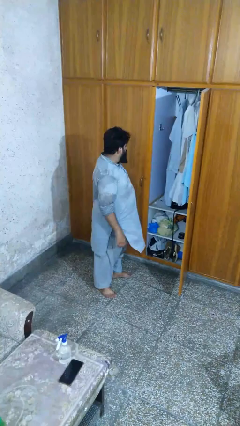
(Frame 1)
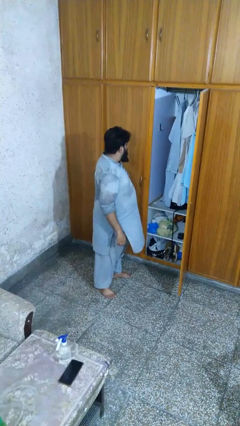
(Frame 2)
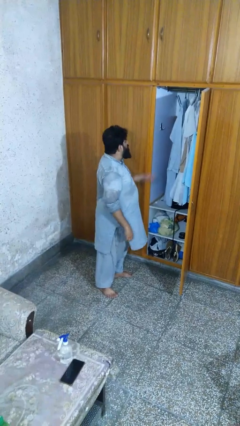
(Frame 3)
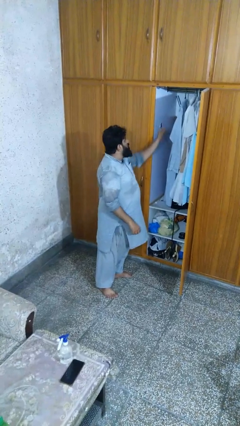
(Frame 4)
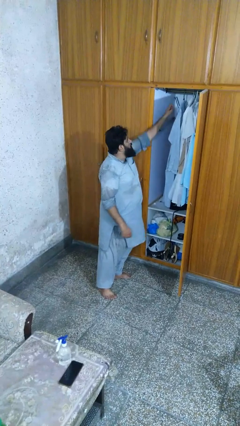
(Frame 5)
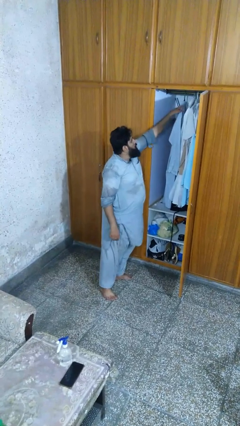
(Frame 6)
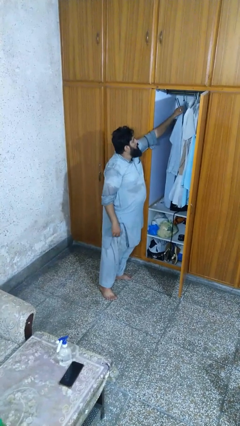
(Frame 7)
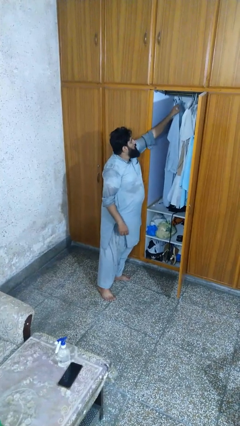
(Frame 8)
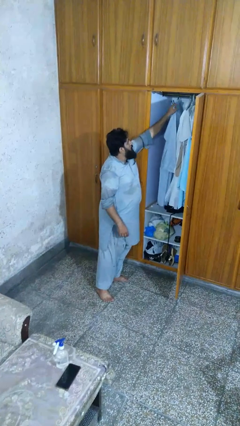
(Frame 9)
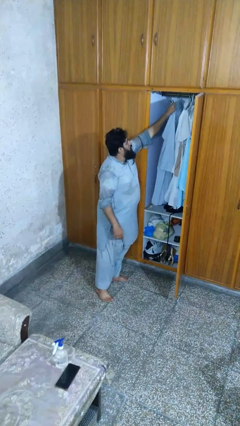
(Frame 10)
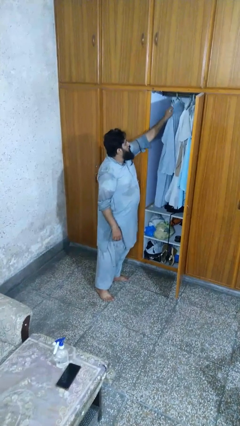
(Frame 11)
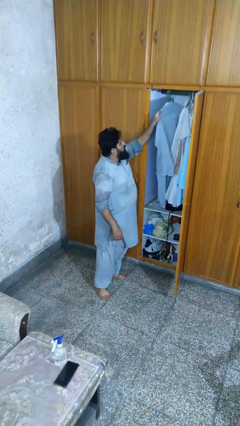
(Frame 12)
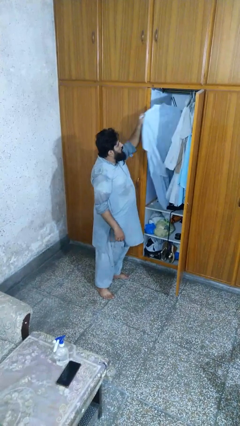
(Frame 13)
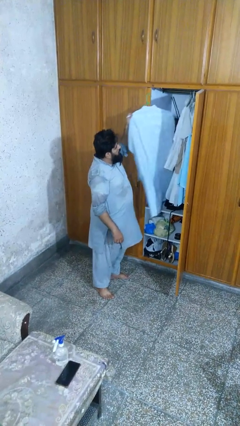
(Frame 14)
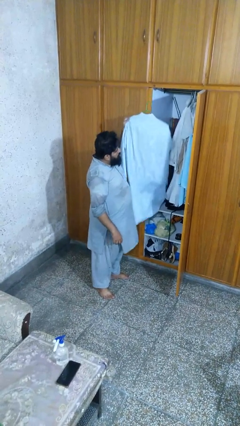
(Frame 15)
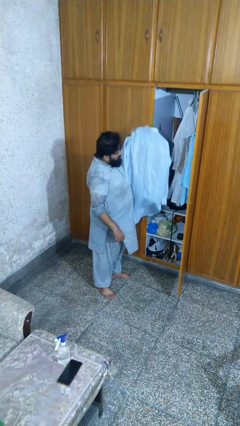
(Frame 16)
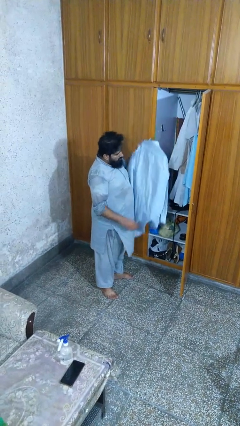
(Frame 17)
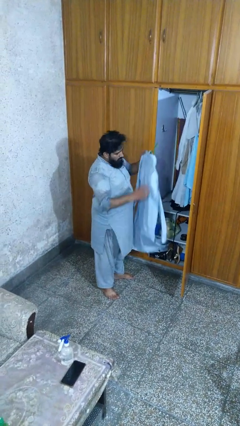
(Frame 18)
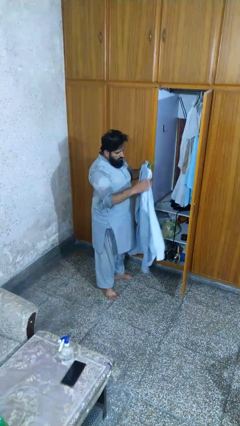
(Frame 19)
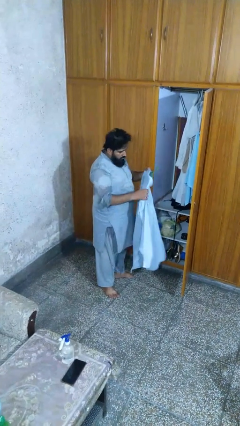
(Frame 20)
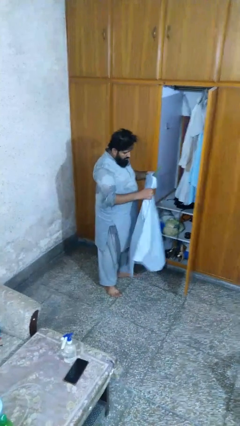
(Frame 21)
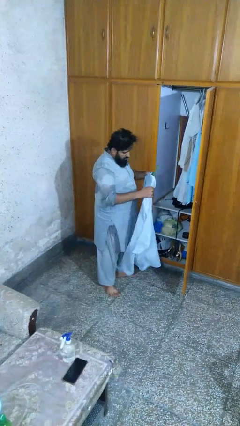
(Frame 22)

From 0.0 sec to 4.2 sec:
person takes clothes from closet

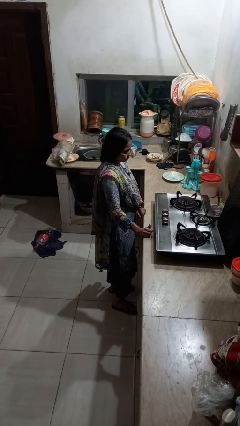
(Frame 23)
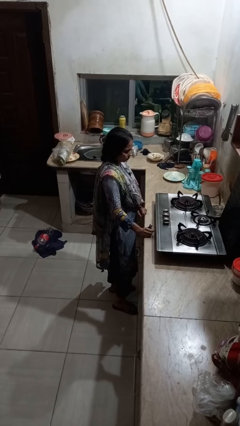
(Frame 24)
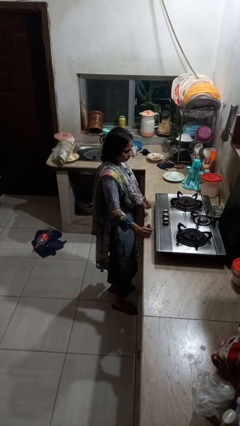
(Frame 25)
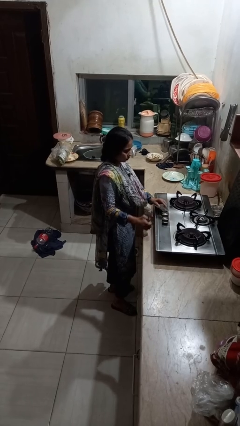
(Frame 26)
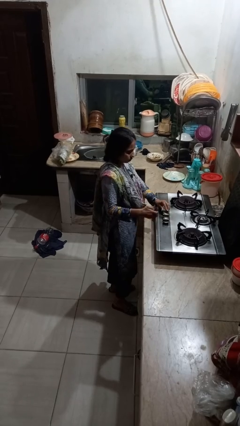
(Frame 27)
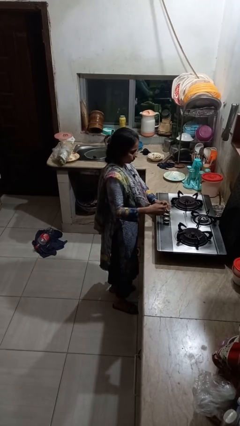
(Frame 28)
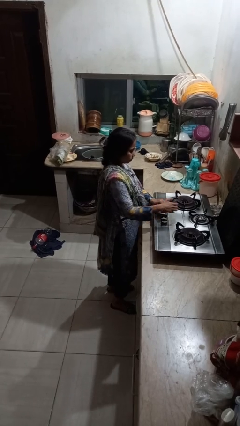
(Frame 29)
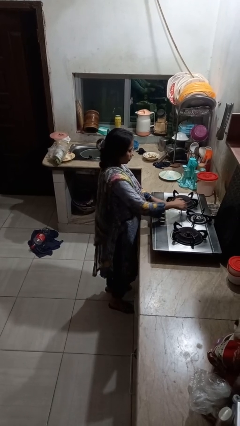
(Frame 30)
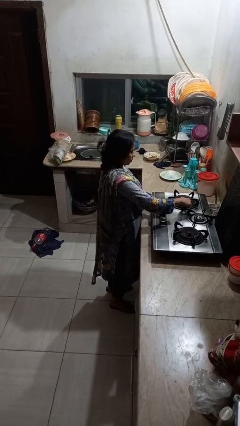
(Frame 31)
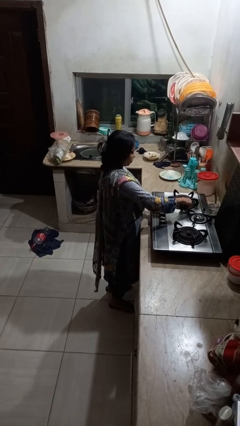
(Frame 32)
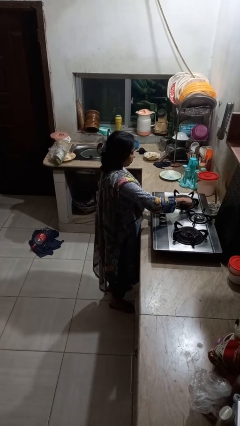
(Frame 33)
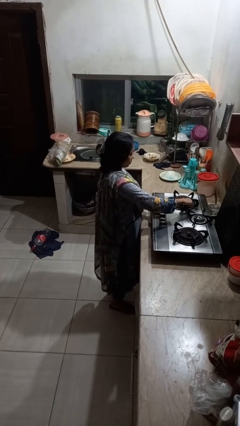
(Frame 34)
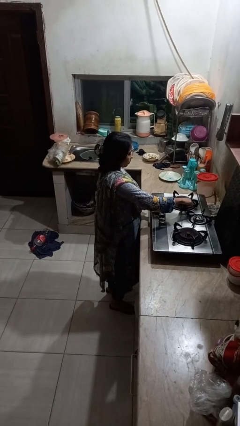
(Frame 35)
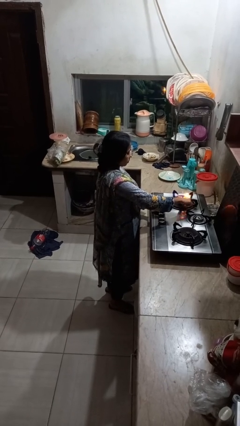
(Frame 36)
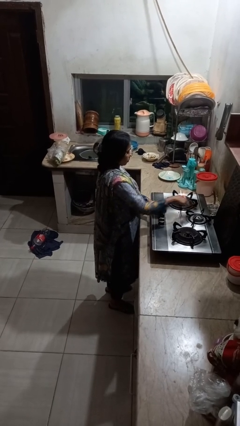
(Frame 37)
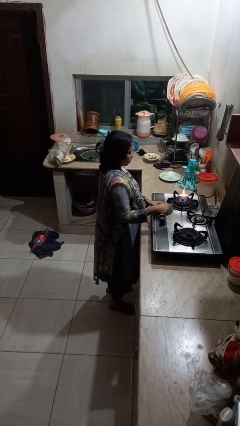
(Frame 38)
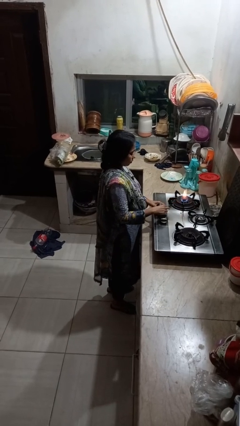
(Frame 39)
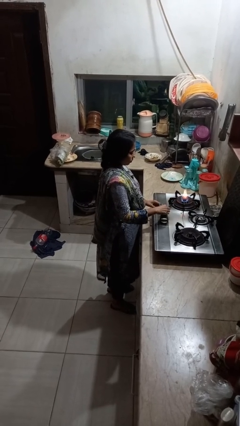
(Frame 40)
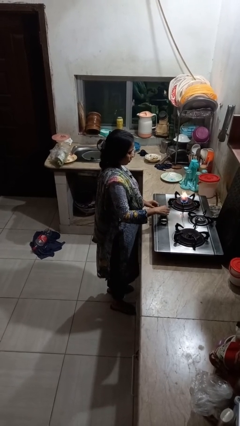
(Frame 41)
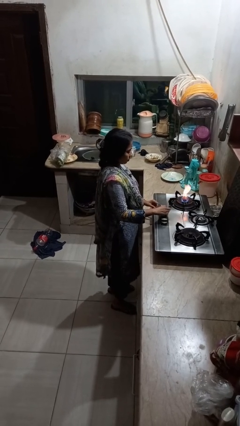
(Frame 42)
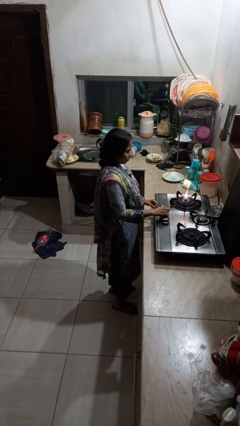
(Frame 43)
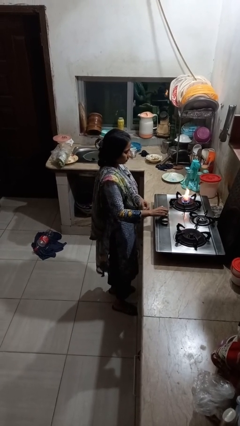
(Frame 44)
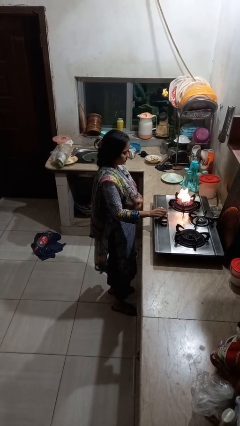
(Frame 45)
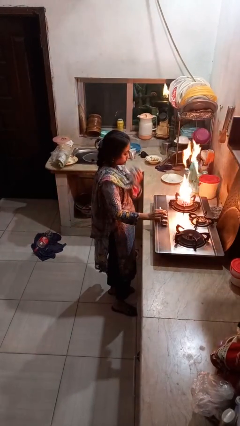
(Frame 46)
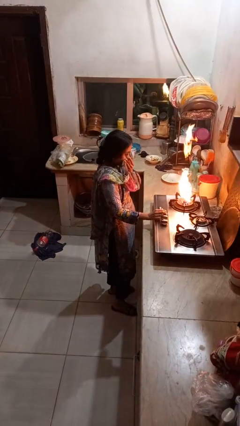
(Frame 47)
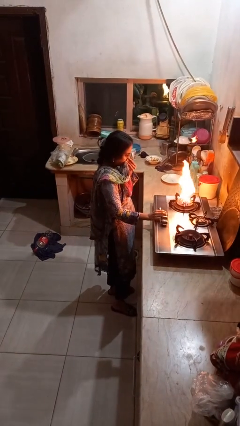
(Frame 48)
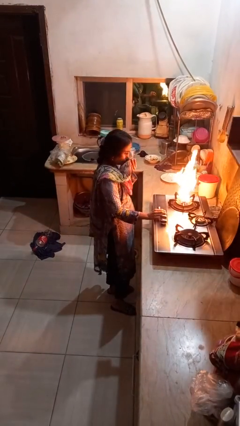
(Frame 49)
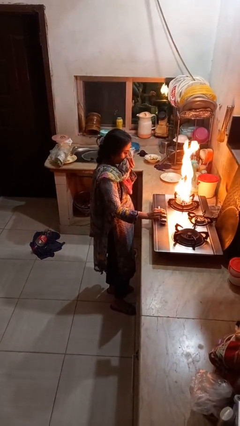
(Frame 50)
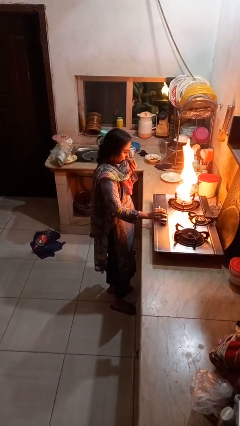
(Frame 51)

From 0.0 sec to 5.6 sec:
person turns on stovetop

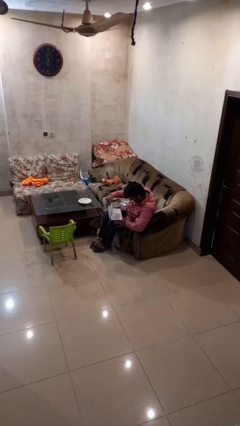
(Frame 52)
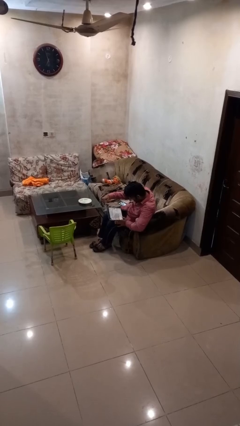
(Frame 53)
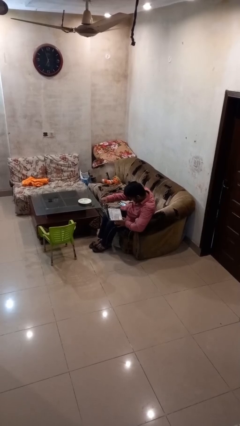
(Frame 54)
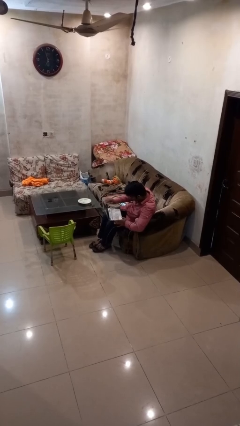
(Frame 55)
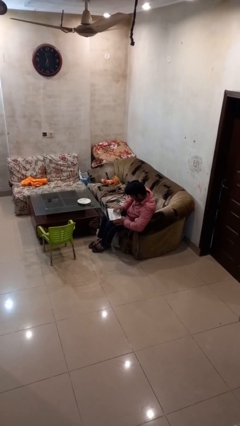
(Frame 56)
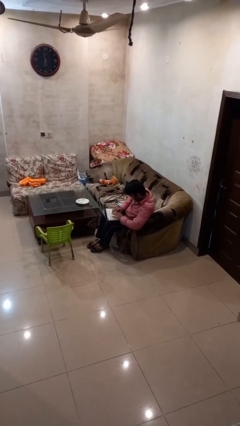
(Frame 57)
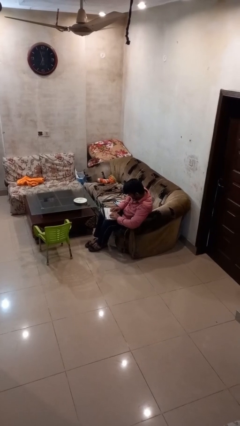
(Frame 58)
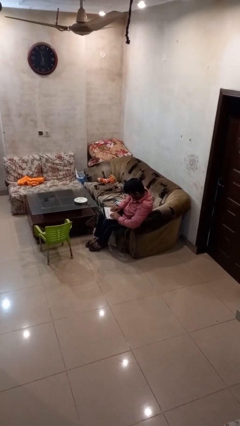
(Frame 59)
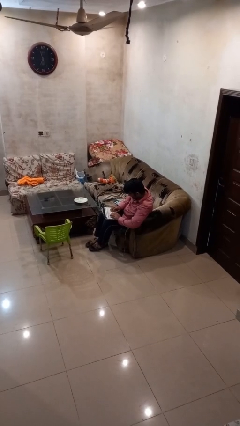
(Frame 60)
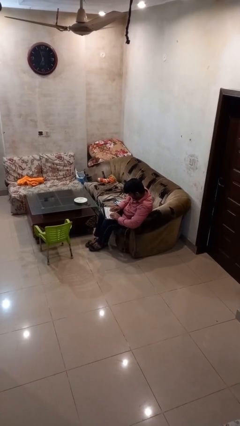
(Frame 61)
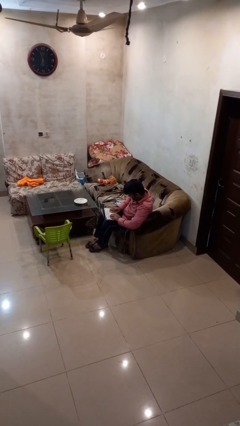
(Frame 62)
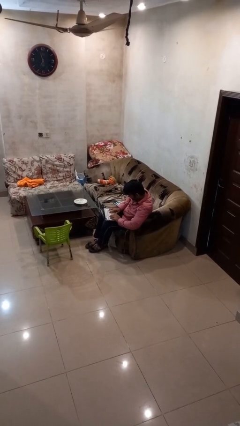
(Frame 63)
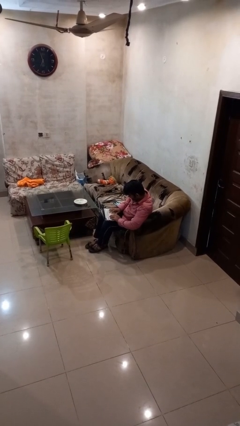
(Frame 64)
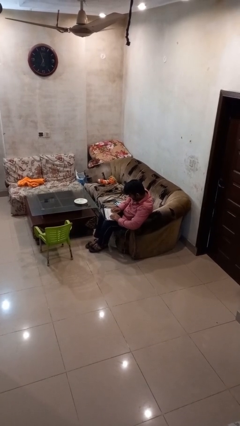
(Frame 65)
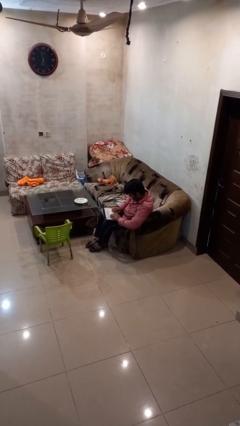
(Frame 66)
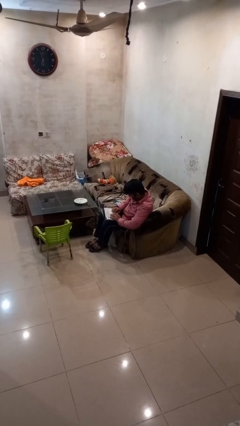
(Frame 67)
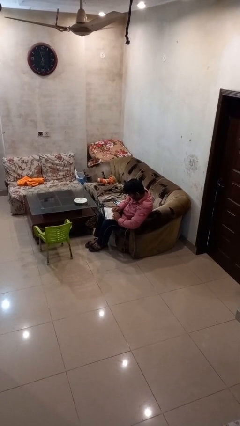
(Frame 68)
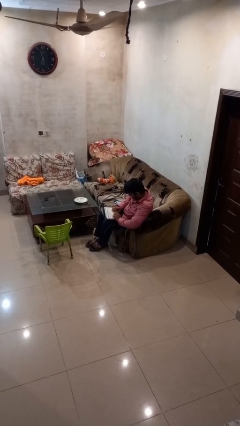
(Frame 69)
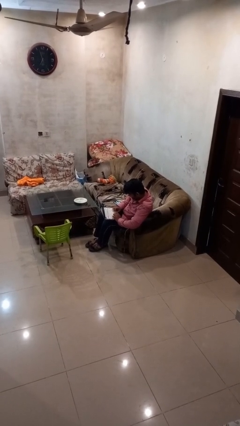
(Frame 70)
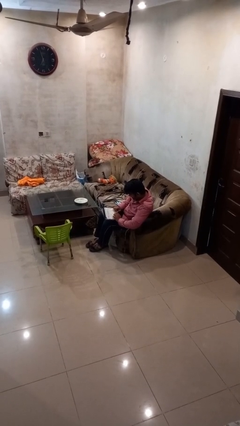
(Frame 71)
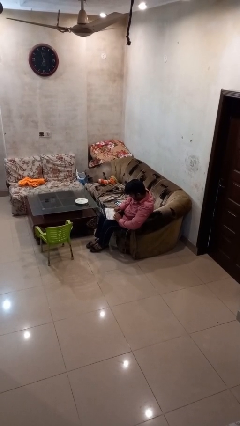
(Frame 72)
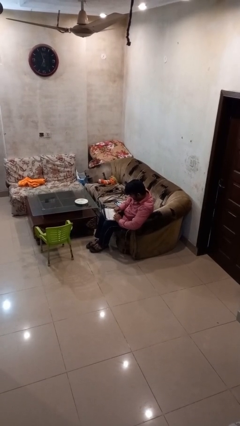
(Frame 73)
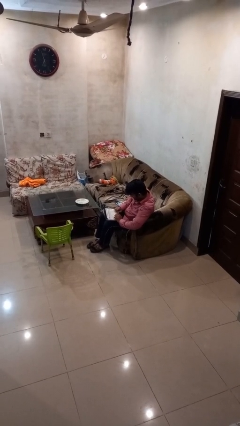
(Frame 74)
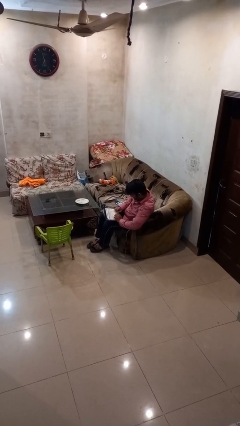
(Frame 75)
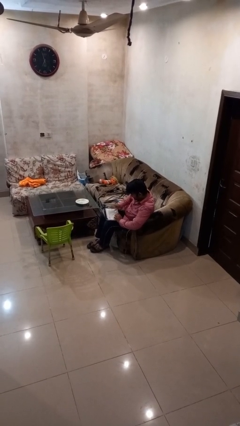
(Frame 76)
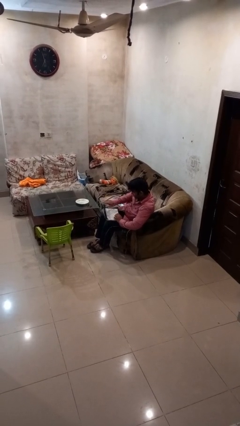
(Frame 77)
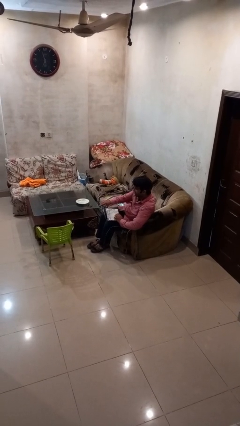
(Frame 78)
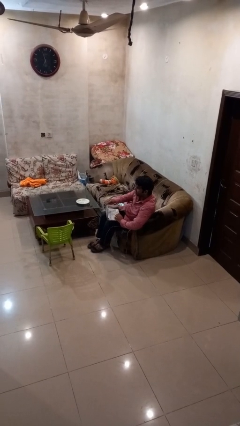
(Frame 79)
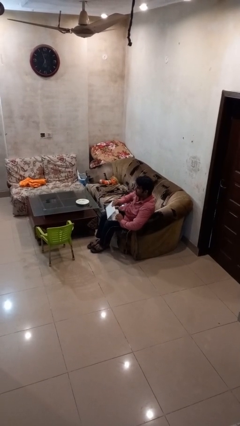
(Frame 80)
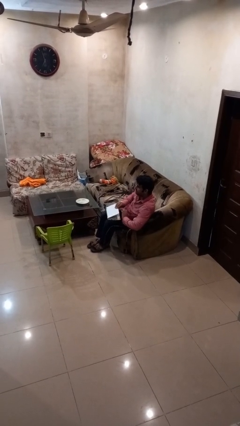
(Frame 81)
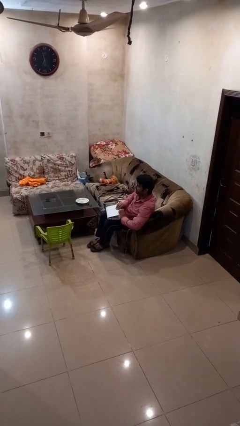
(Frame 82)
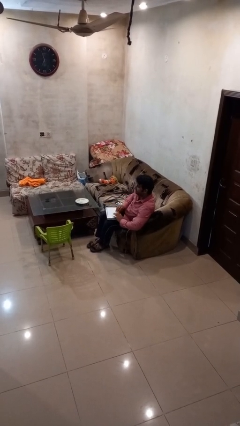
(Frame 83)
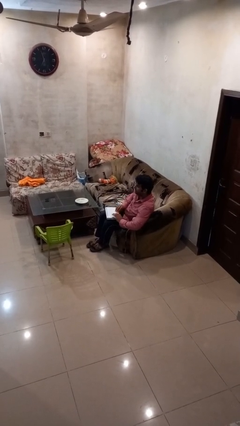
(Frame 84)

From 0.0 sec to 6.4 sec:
person interacts with laptop

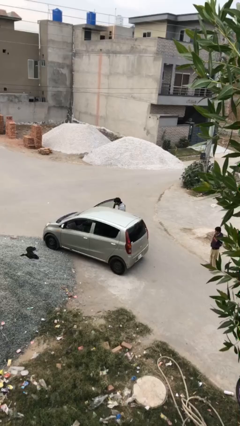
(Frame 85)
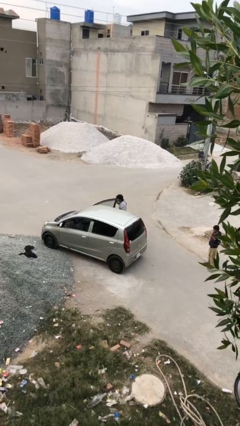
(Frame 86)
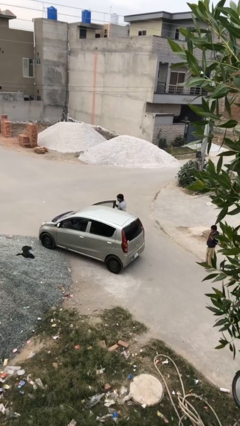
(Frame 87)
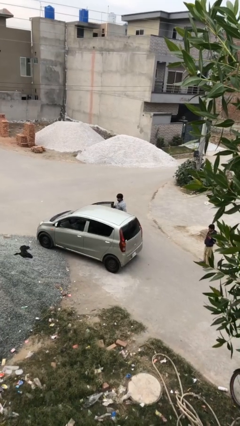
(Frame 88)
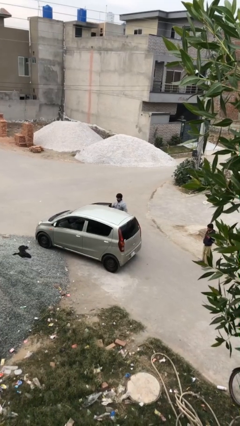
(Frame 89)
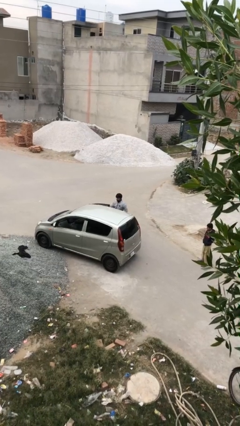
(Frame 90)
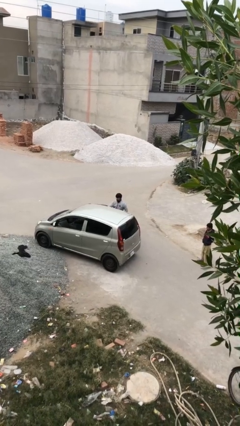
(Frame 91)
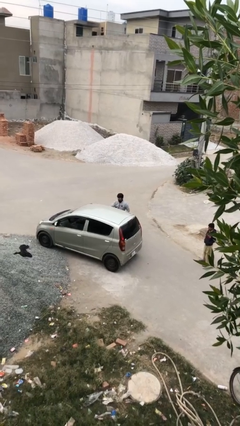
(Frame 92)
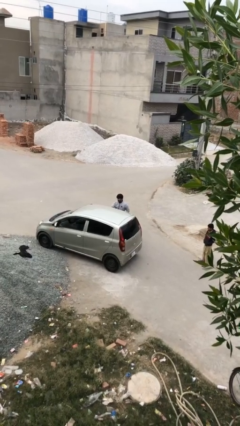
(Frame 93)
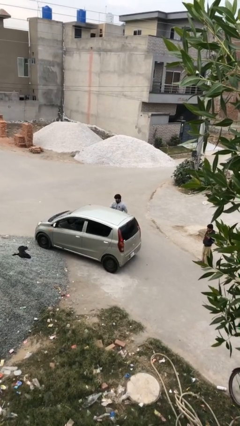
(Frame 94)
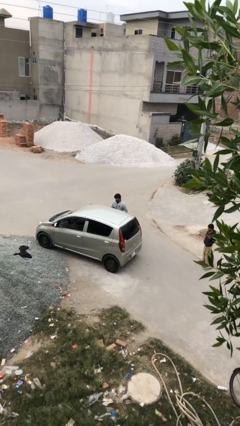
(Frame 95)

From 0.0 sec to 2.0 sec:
person closes car door
